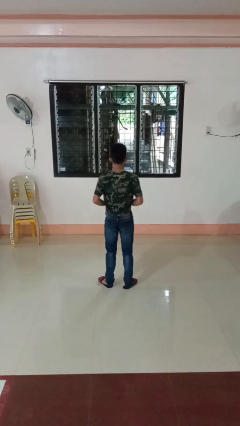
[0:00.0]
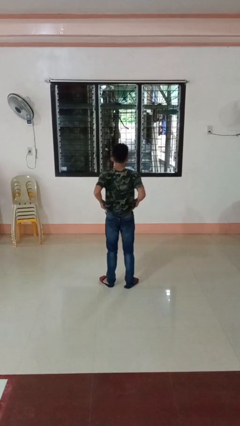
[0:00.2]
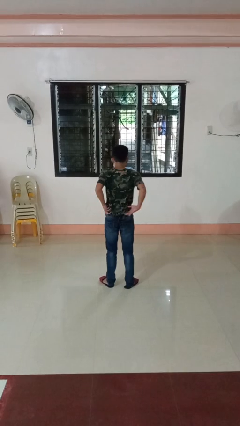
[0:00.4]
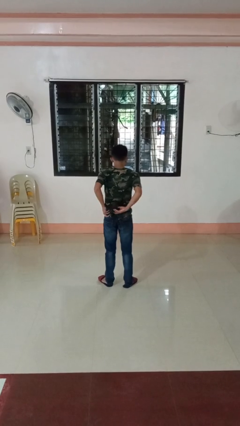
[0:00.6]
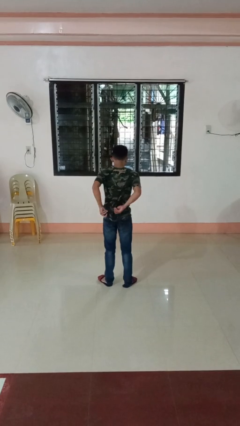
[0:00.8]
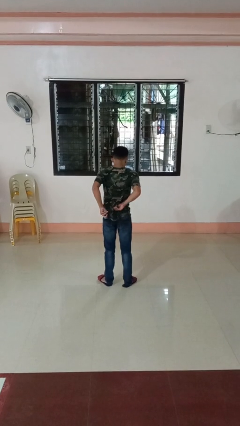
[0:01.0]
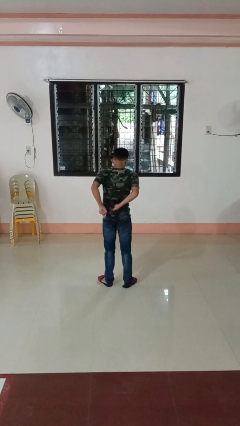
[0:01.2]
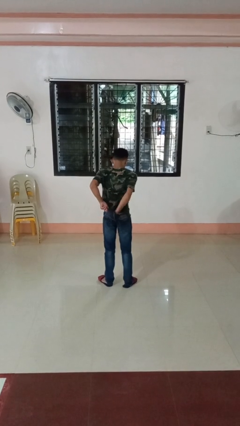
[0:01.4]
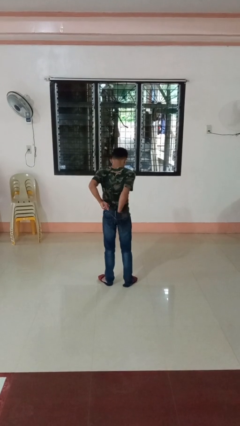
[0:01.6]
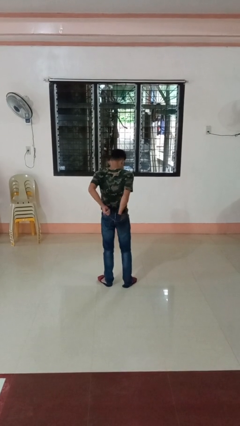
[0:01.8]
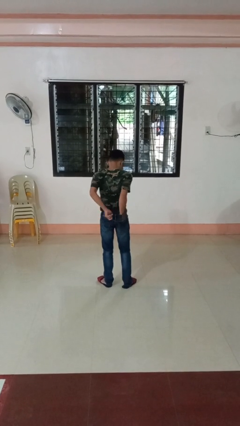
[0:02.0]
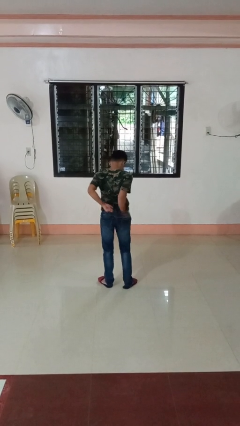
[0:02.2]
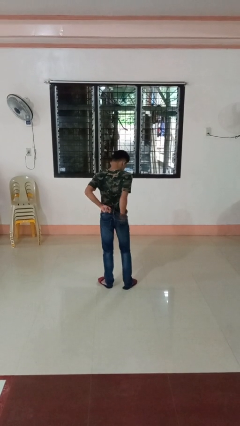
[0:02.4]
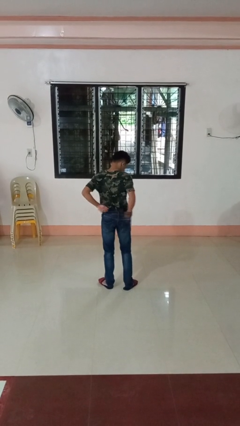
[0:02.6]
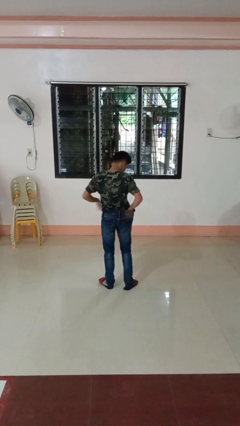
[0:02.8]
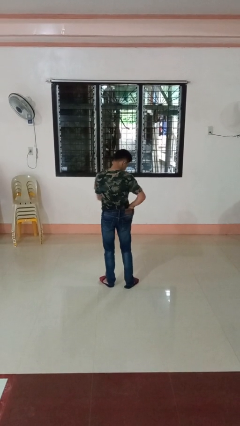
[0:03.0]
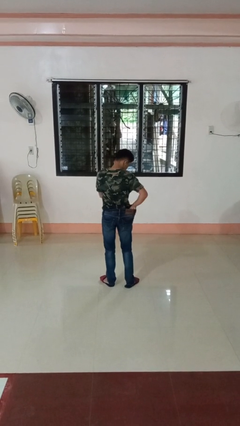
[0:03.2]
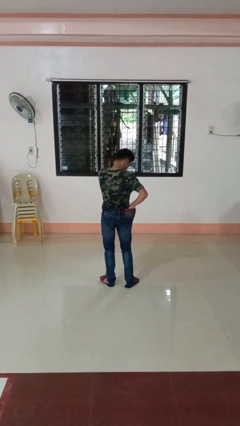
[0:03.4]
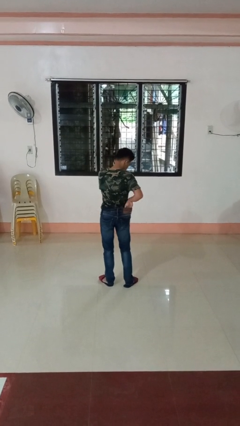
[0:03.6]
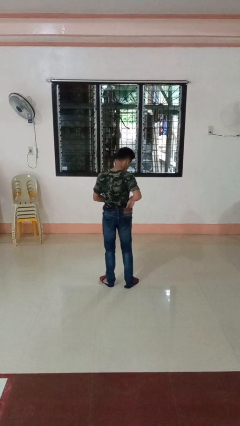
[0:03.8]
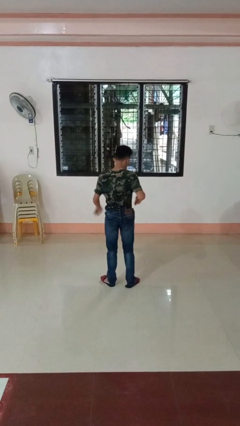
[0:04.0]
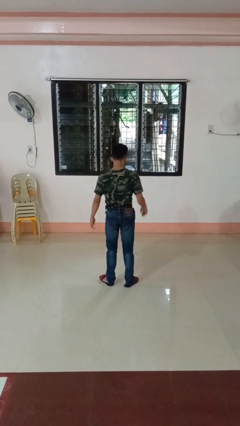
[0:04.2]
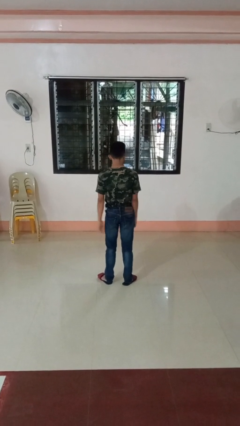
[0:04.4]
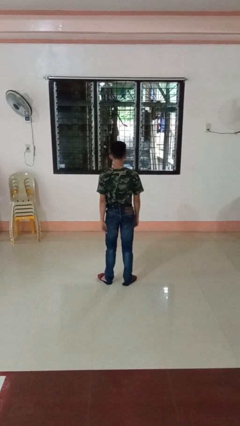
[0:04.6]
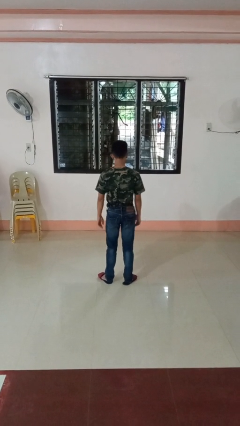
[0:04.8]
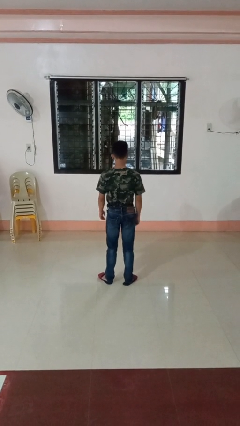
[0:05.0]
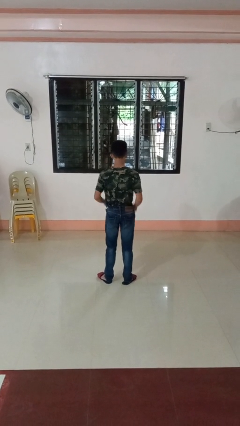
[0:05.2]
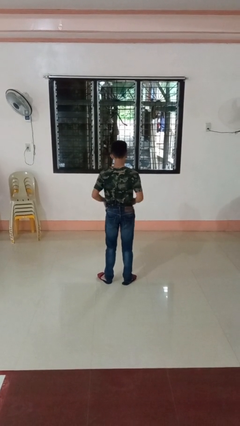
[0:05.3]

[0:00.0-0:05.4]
person tucks in shirt

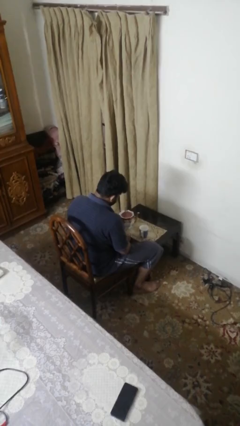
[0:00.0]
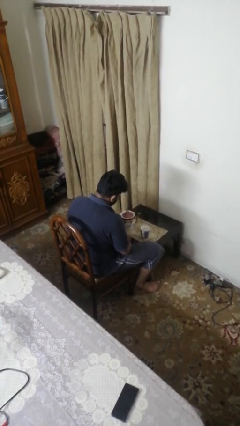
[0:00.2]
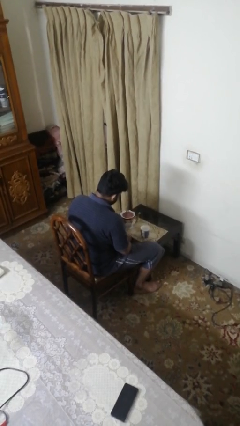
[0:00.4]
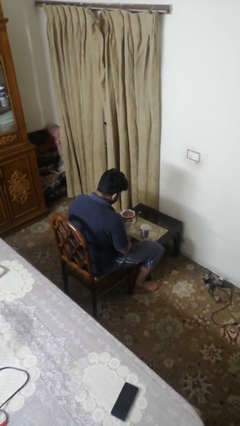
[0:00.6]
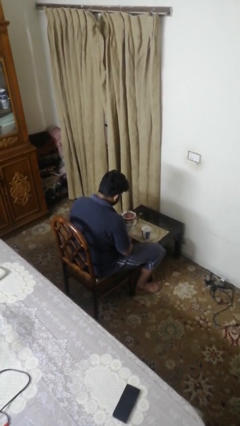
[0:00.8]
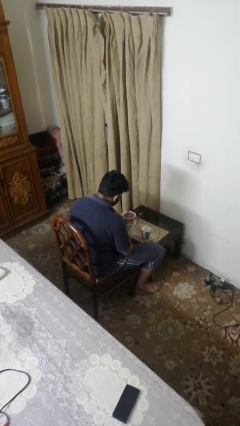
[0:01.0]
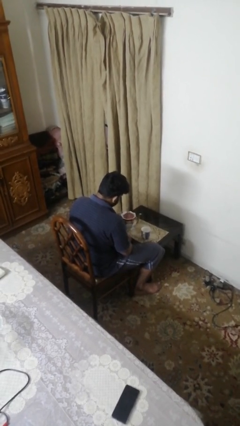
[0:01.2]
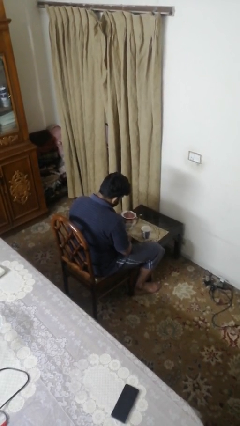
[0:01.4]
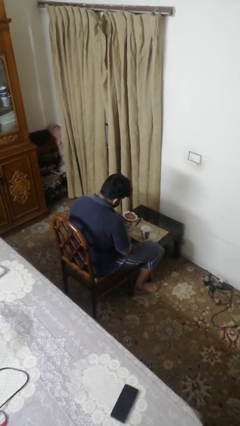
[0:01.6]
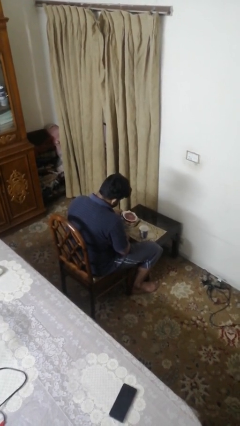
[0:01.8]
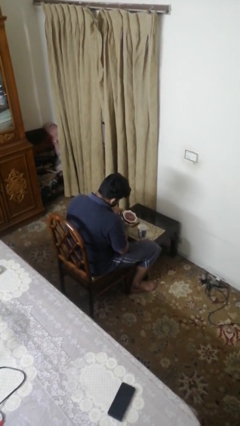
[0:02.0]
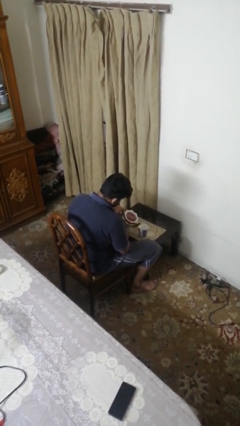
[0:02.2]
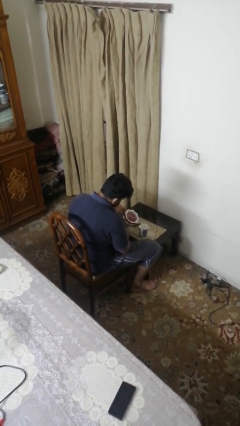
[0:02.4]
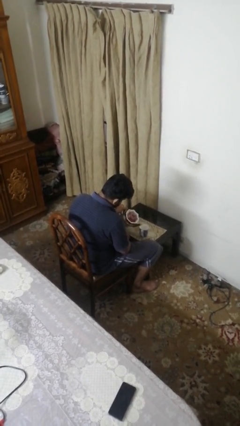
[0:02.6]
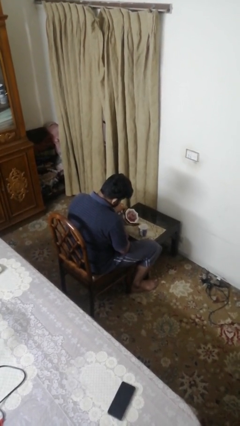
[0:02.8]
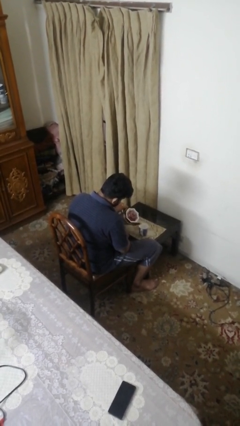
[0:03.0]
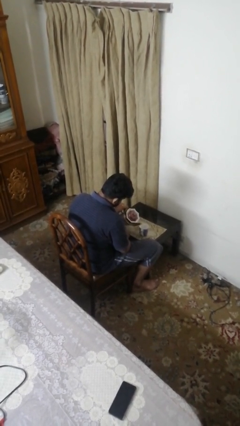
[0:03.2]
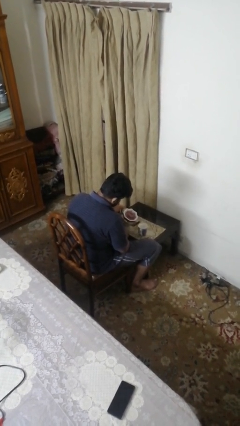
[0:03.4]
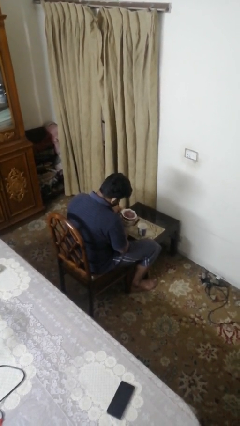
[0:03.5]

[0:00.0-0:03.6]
person pours coffee into mug

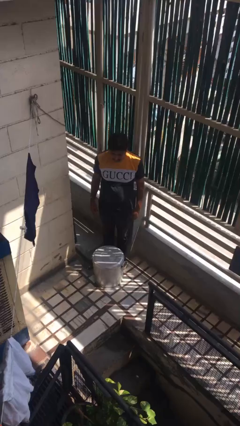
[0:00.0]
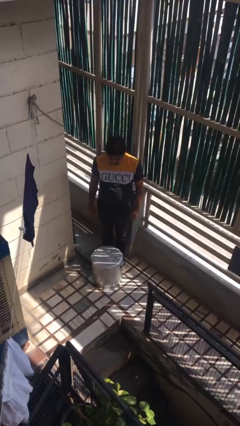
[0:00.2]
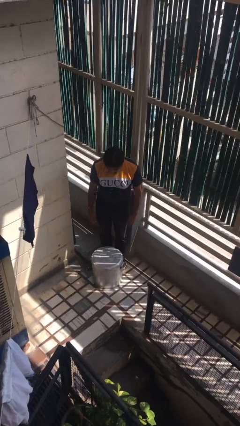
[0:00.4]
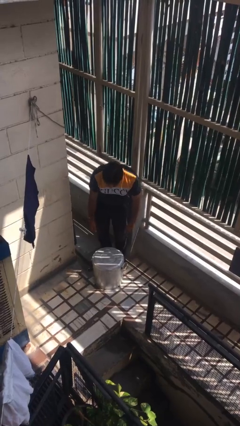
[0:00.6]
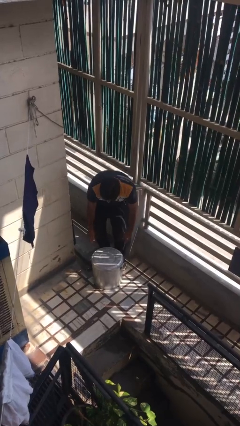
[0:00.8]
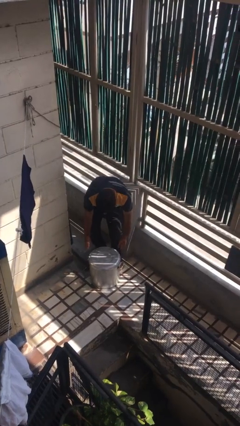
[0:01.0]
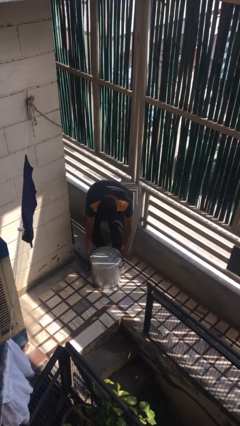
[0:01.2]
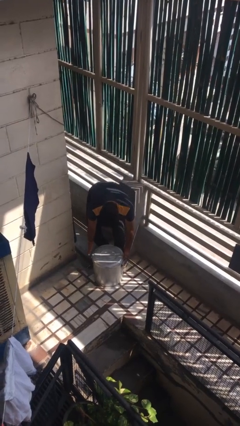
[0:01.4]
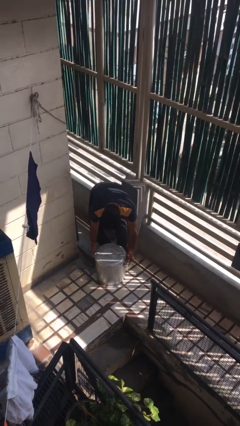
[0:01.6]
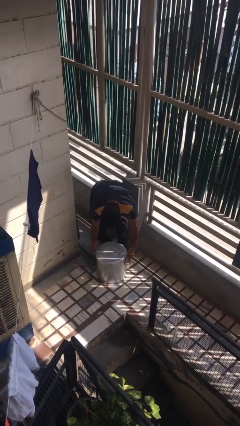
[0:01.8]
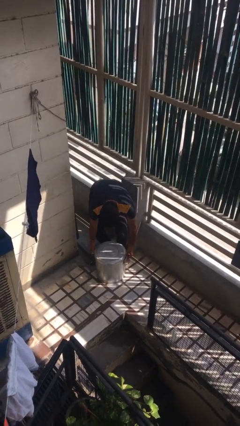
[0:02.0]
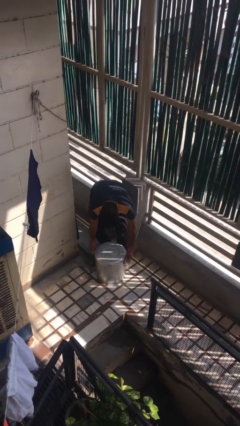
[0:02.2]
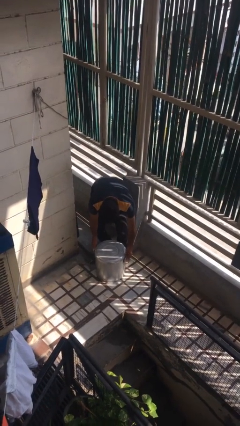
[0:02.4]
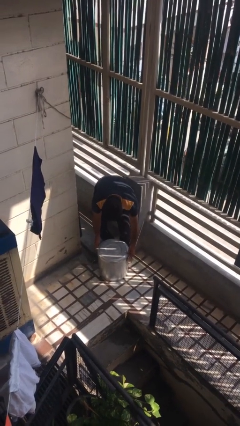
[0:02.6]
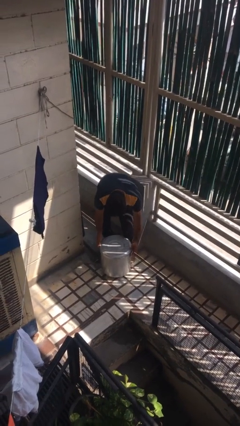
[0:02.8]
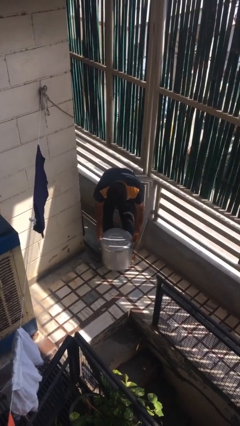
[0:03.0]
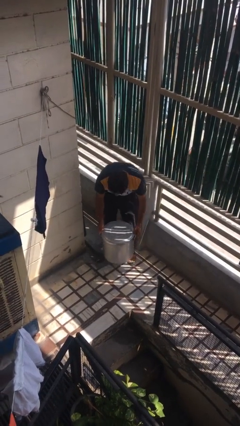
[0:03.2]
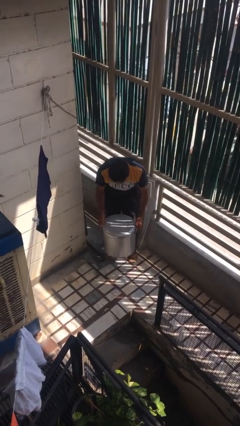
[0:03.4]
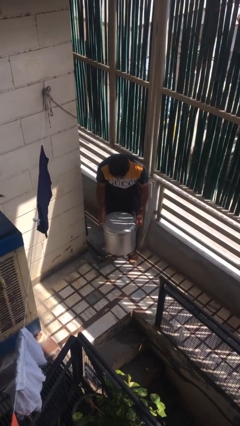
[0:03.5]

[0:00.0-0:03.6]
person picks up object from floor

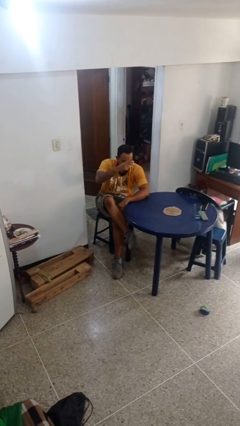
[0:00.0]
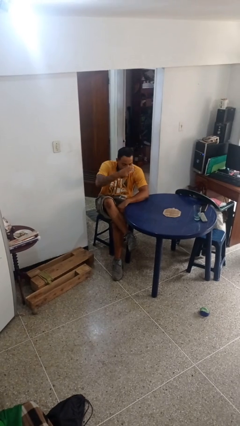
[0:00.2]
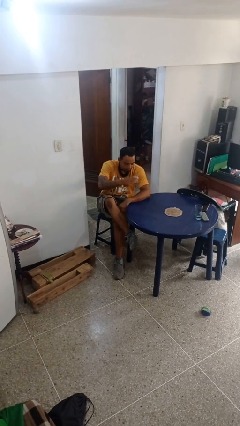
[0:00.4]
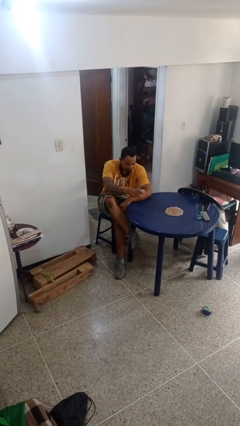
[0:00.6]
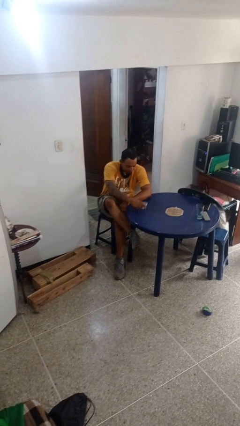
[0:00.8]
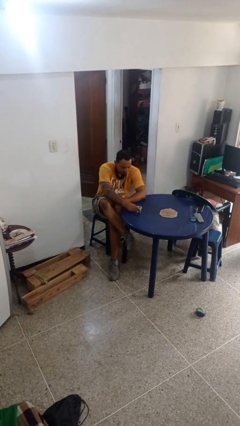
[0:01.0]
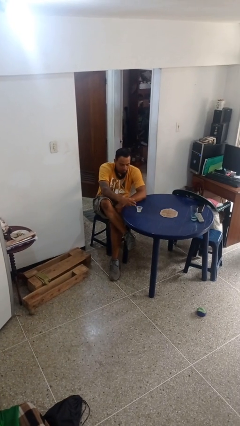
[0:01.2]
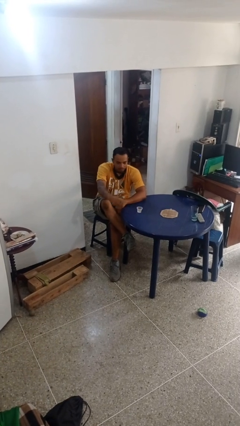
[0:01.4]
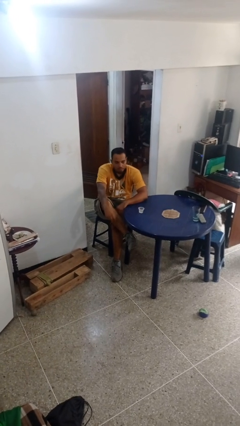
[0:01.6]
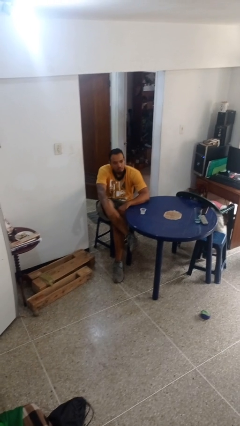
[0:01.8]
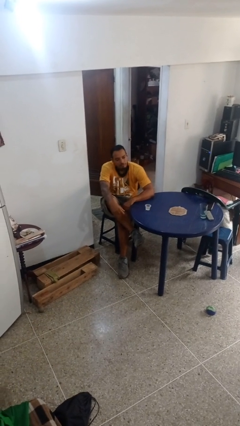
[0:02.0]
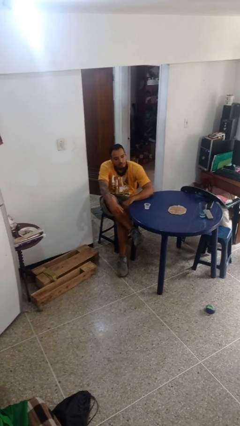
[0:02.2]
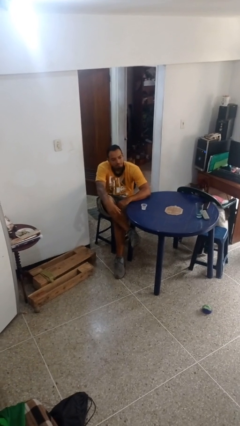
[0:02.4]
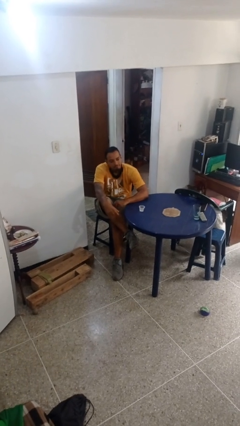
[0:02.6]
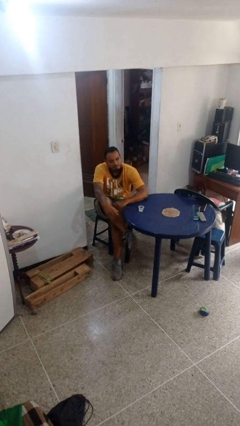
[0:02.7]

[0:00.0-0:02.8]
person puts down object on table

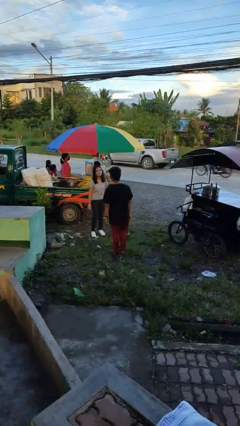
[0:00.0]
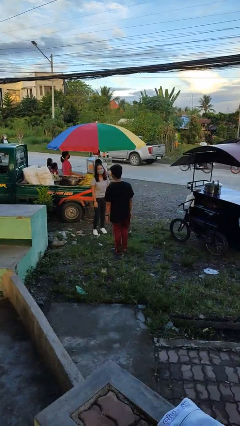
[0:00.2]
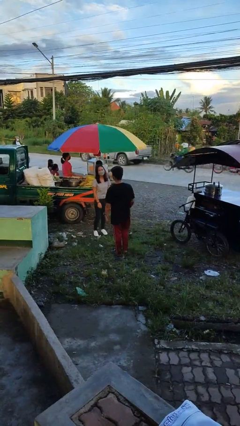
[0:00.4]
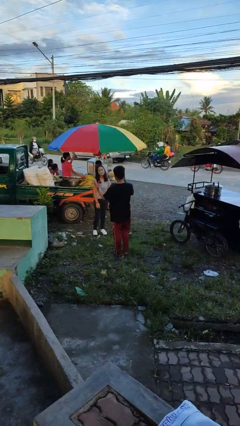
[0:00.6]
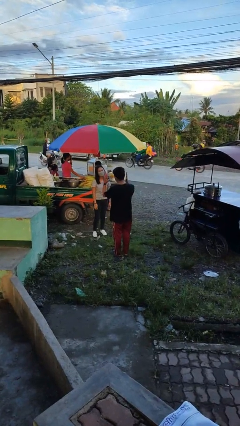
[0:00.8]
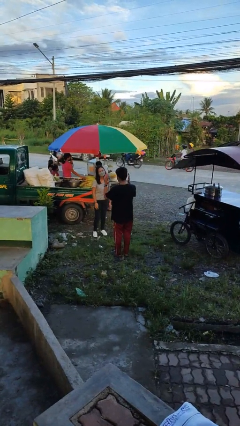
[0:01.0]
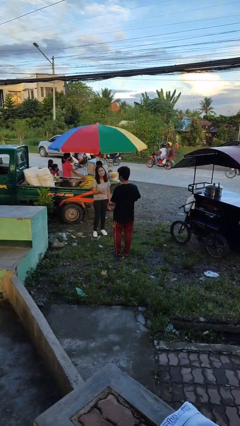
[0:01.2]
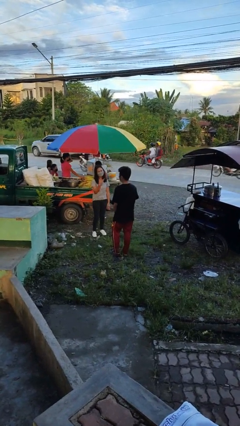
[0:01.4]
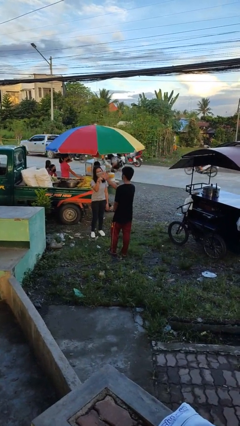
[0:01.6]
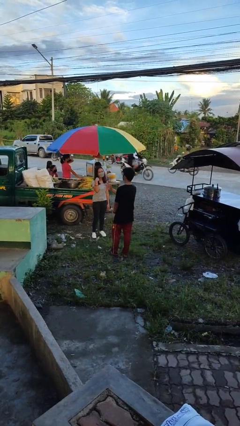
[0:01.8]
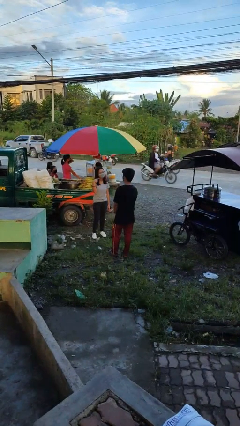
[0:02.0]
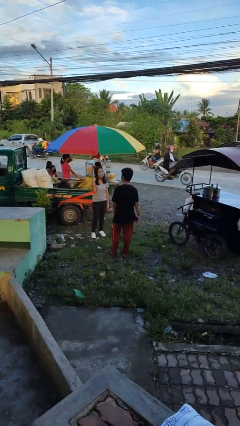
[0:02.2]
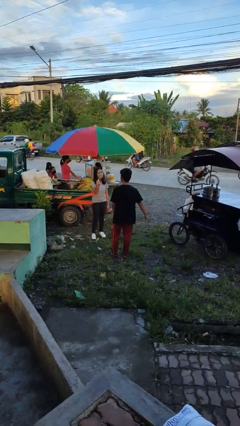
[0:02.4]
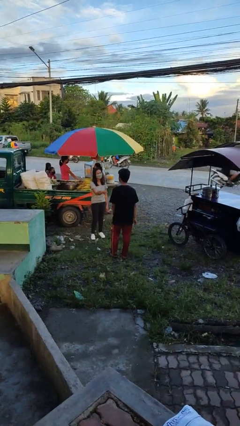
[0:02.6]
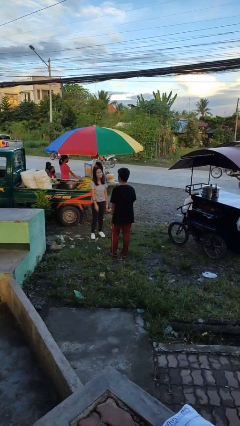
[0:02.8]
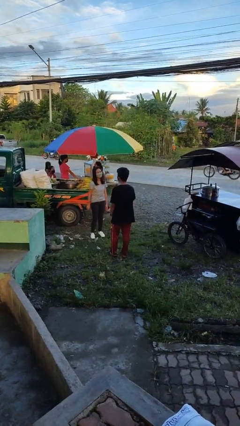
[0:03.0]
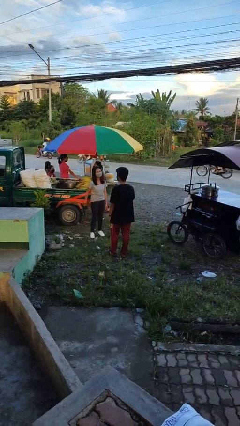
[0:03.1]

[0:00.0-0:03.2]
person talks to person
